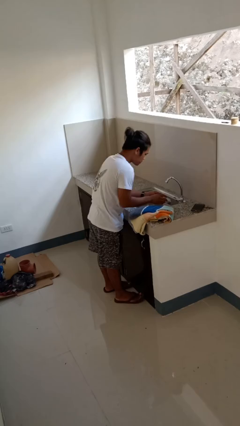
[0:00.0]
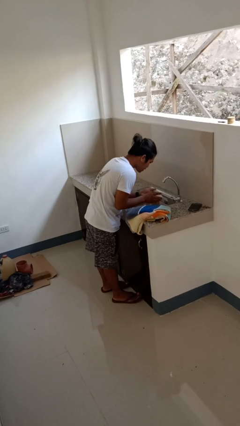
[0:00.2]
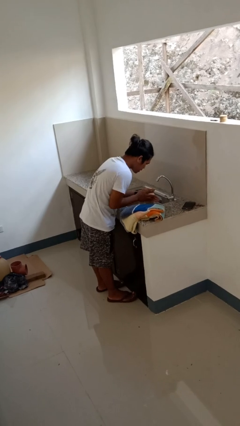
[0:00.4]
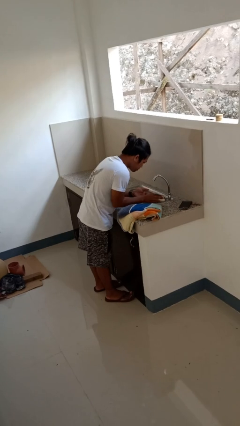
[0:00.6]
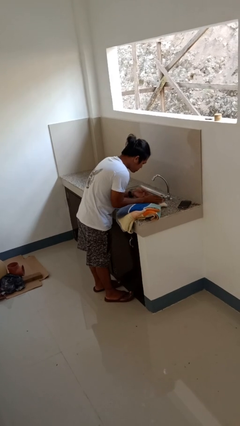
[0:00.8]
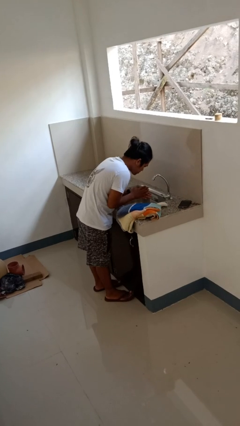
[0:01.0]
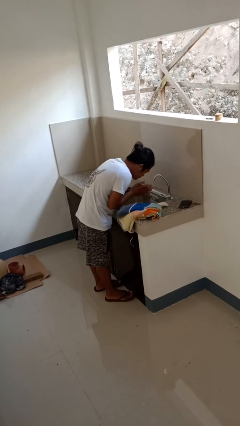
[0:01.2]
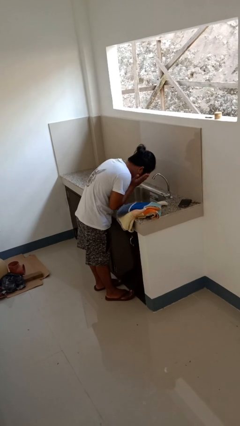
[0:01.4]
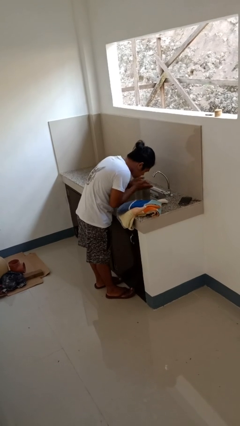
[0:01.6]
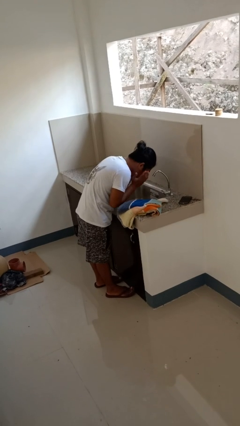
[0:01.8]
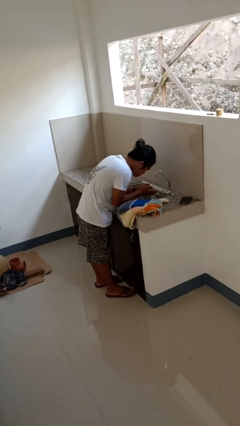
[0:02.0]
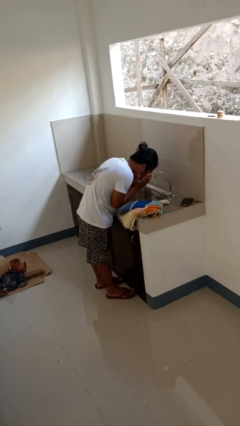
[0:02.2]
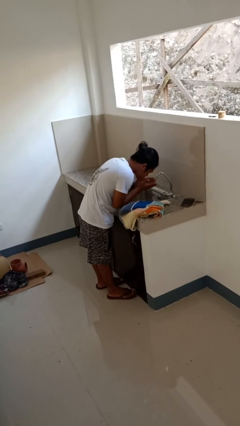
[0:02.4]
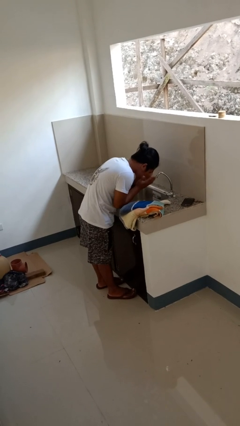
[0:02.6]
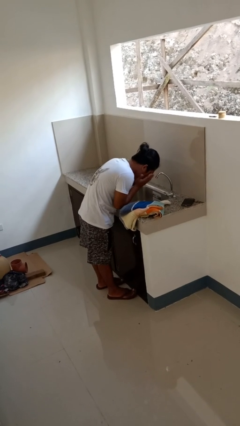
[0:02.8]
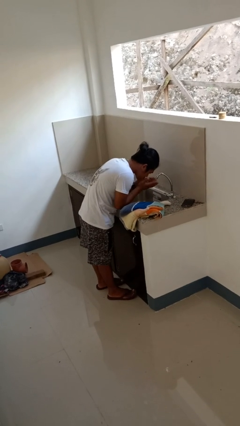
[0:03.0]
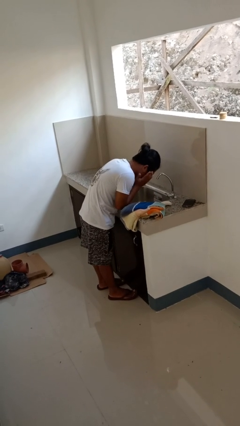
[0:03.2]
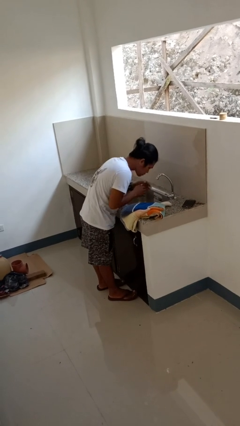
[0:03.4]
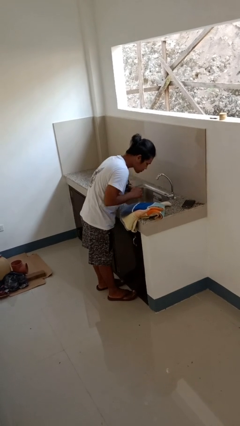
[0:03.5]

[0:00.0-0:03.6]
person washes face

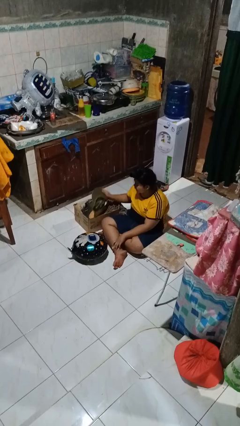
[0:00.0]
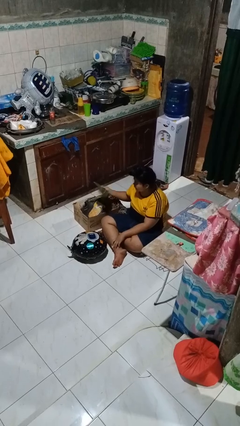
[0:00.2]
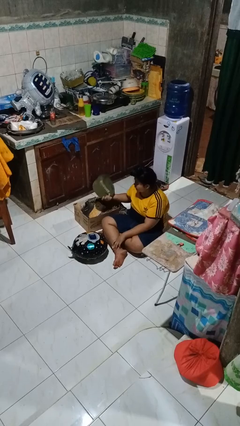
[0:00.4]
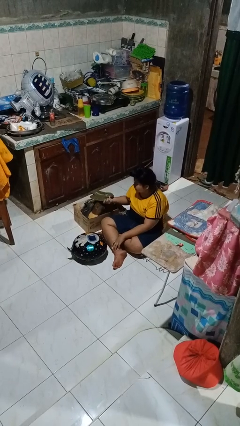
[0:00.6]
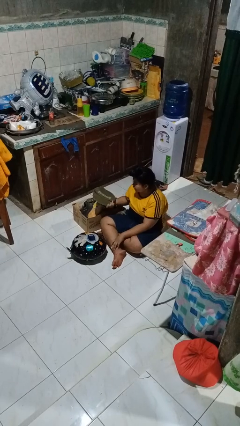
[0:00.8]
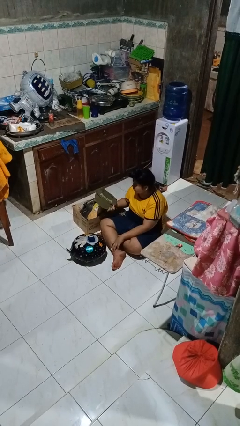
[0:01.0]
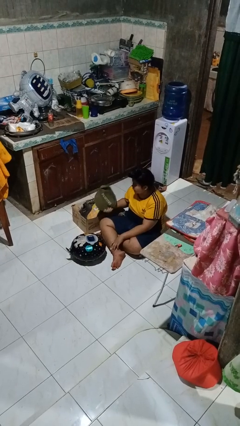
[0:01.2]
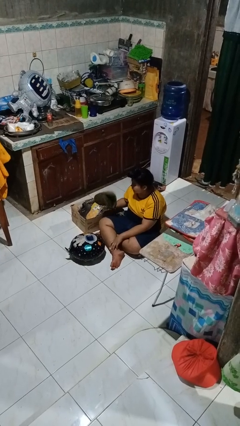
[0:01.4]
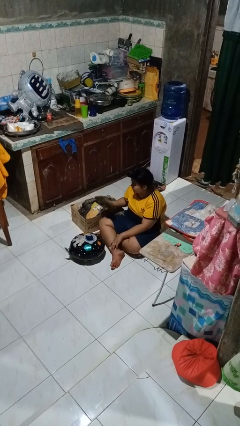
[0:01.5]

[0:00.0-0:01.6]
person takes object from box

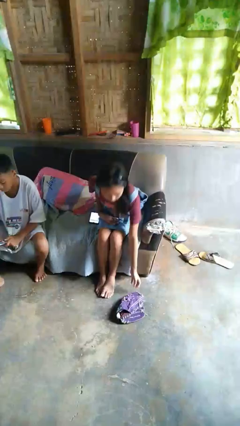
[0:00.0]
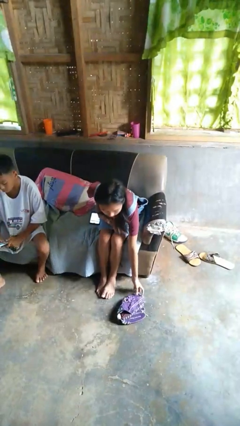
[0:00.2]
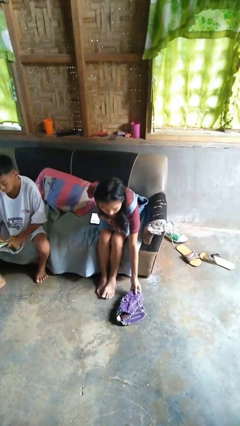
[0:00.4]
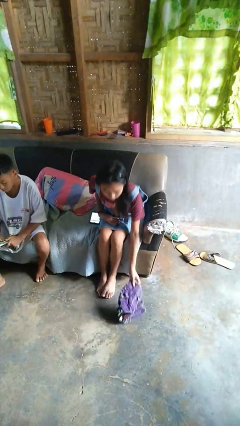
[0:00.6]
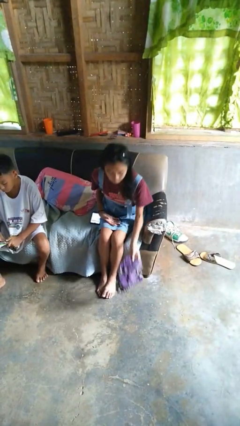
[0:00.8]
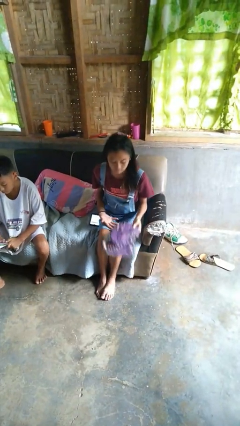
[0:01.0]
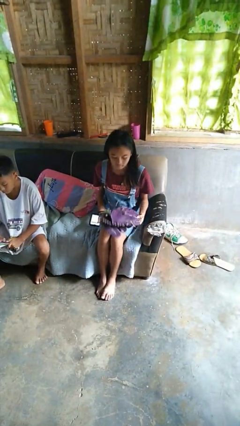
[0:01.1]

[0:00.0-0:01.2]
person picks up object from floor

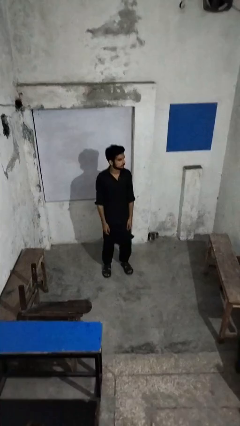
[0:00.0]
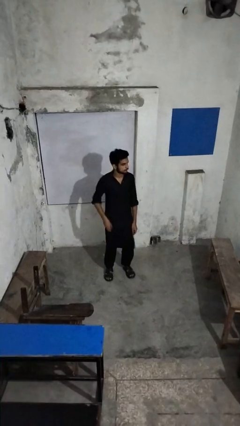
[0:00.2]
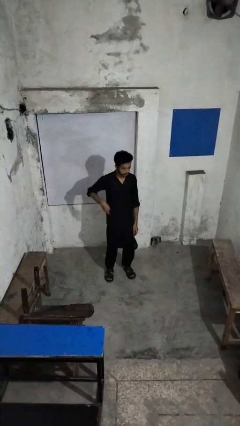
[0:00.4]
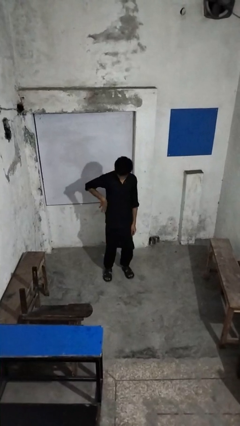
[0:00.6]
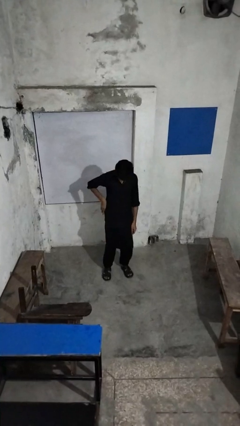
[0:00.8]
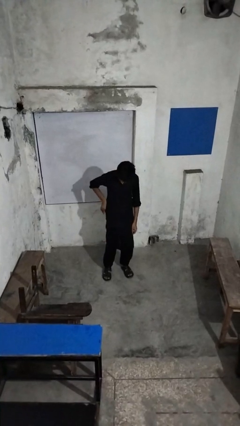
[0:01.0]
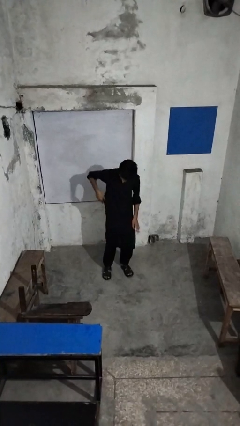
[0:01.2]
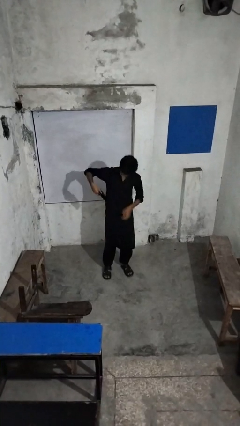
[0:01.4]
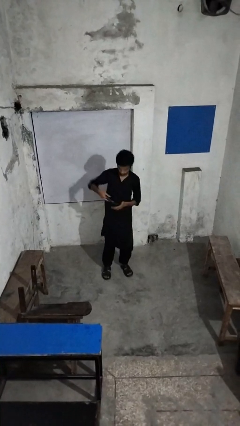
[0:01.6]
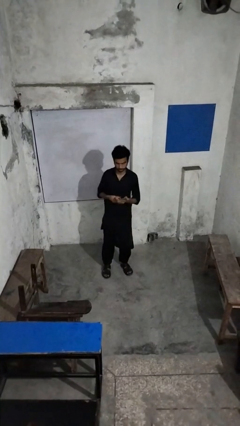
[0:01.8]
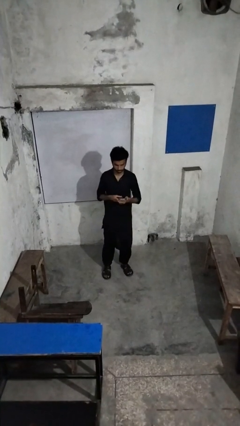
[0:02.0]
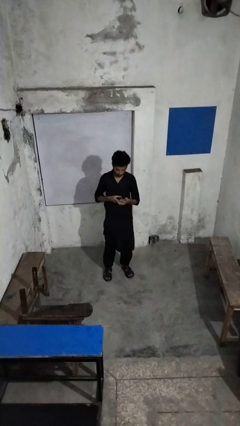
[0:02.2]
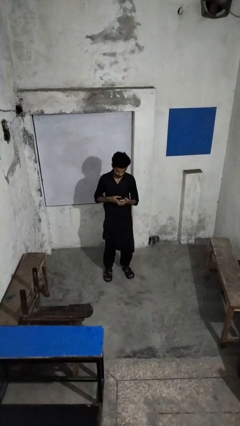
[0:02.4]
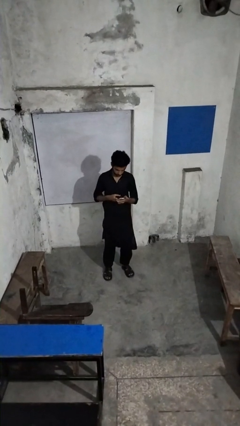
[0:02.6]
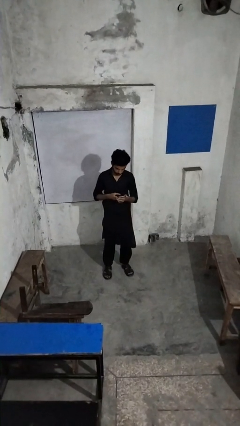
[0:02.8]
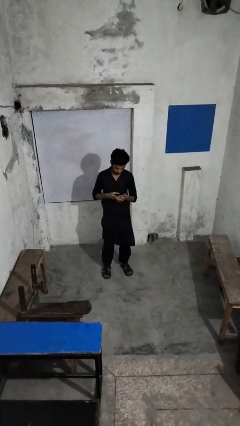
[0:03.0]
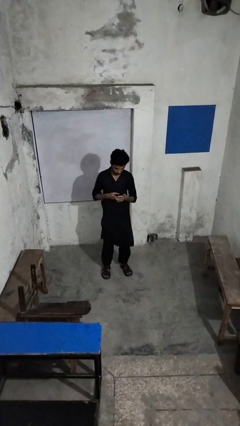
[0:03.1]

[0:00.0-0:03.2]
person takes phone from pocket

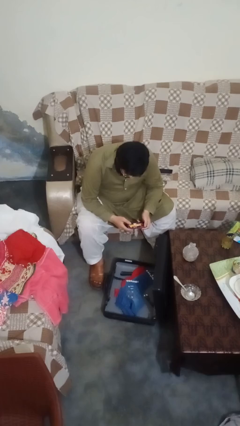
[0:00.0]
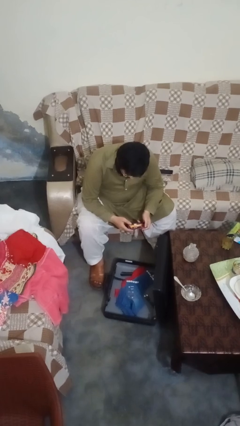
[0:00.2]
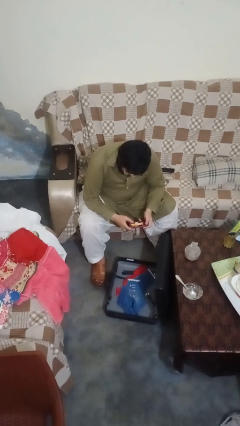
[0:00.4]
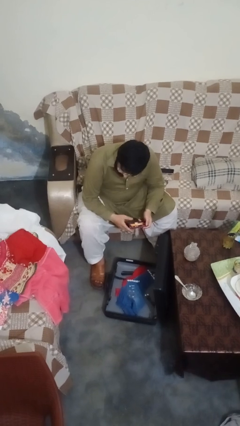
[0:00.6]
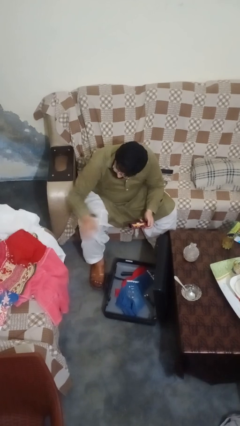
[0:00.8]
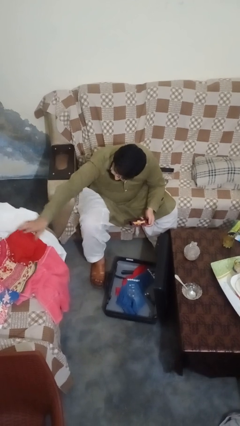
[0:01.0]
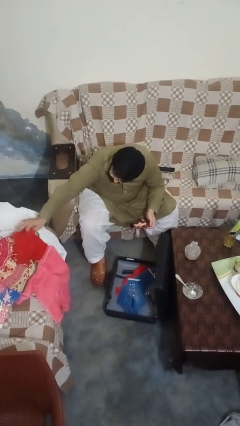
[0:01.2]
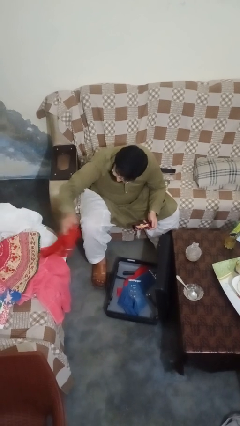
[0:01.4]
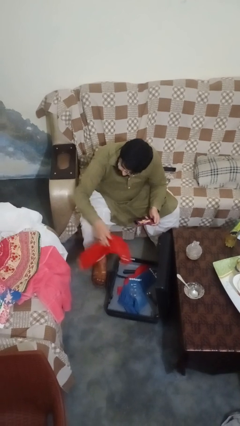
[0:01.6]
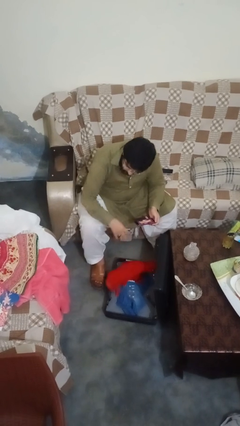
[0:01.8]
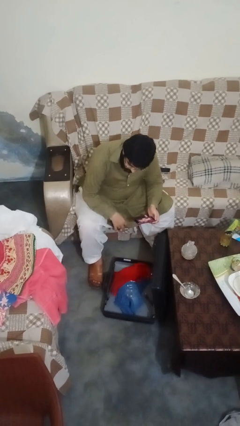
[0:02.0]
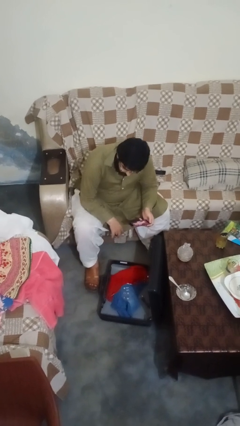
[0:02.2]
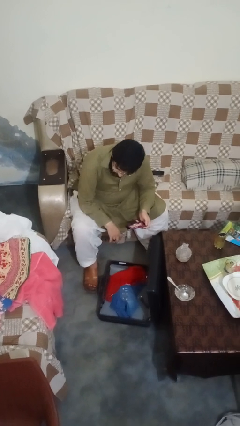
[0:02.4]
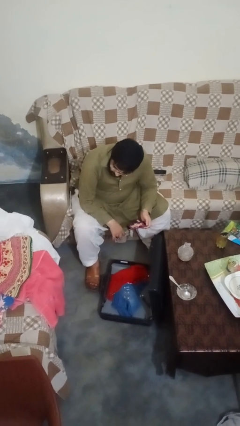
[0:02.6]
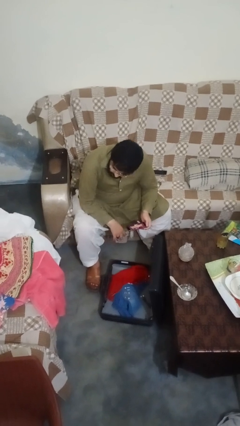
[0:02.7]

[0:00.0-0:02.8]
person loads clothes into suitcase

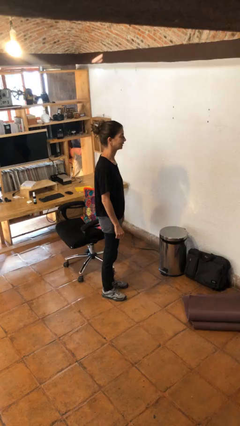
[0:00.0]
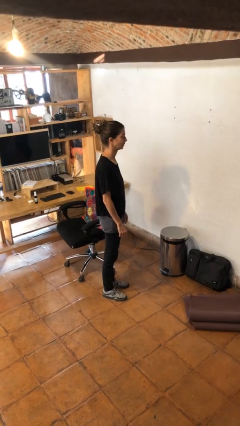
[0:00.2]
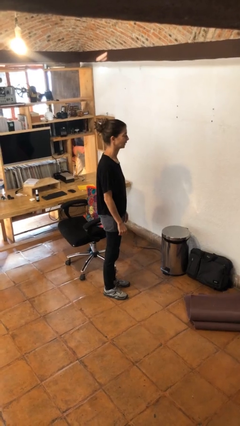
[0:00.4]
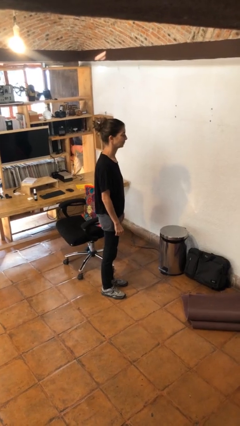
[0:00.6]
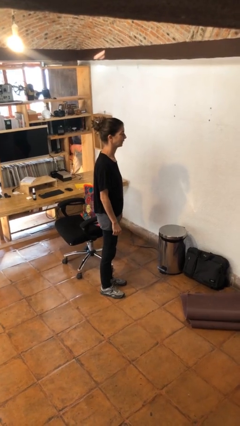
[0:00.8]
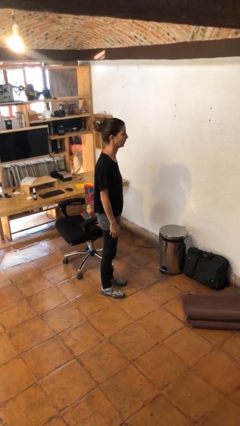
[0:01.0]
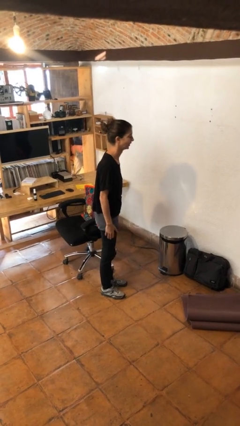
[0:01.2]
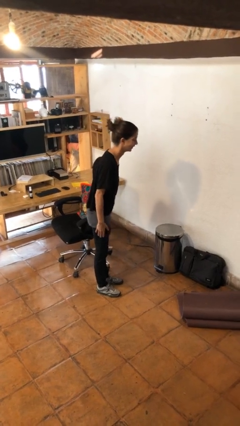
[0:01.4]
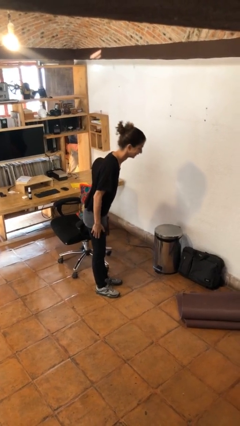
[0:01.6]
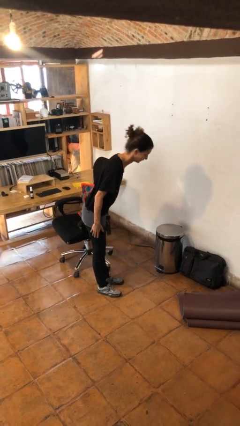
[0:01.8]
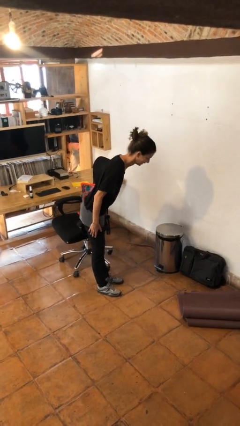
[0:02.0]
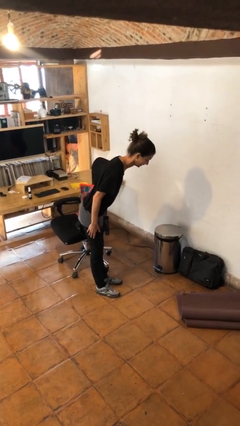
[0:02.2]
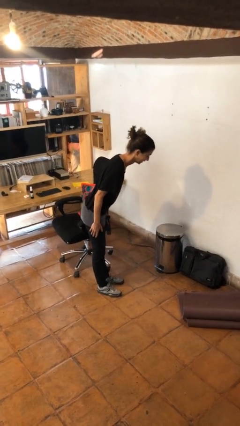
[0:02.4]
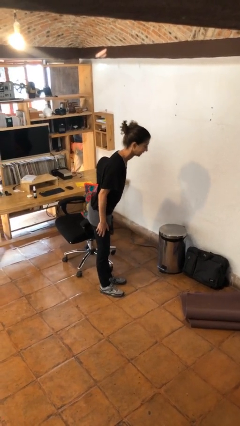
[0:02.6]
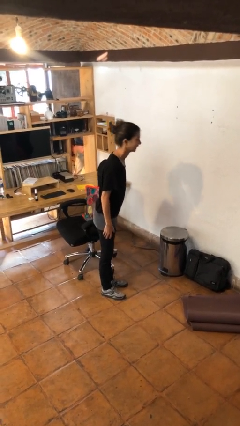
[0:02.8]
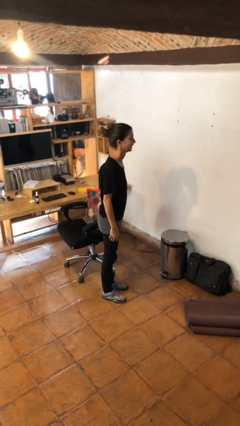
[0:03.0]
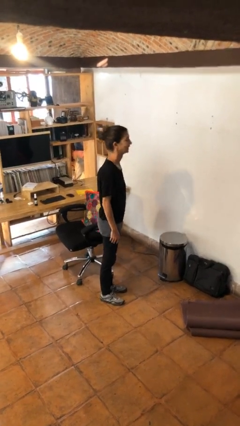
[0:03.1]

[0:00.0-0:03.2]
person bows

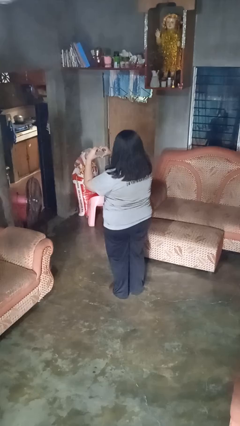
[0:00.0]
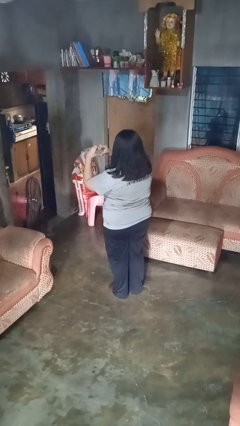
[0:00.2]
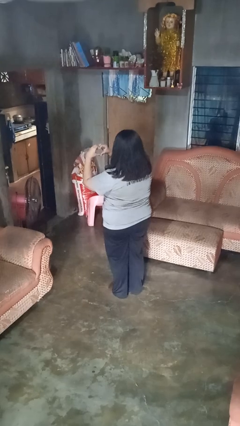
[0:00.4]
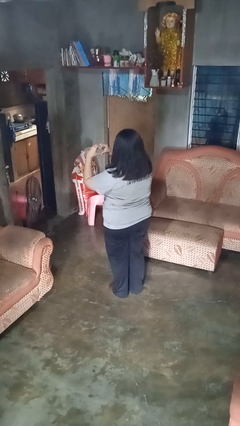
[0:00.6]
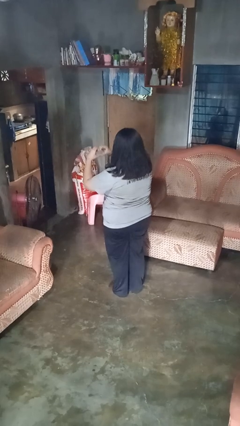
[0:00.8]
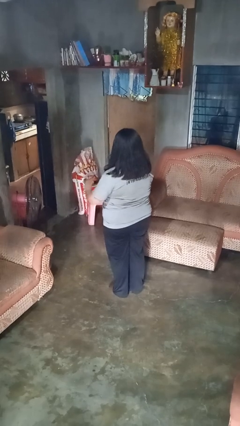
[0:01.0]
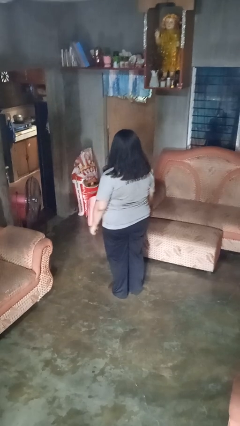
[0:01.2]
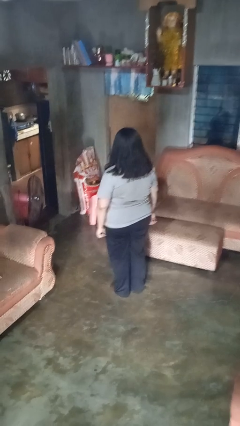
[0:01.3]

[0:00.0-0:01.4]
person gestures heart

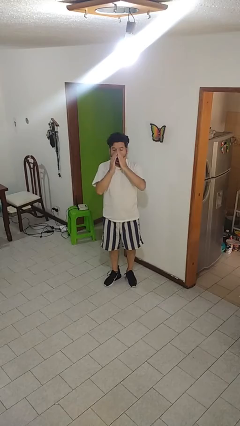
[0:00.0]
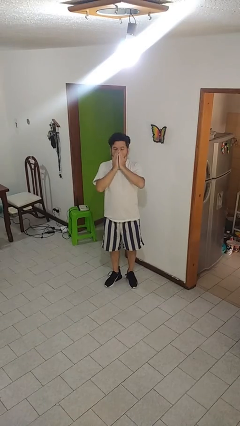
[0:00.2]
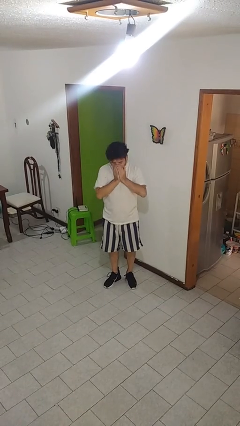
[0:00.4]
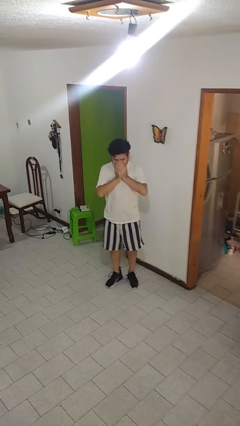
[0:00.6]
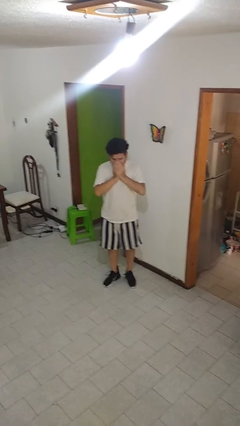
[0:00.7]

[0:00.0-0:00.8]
person sneezes into hand
